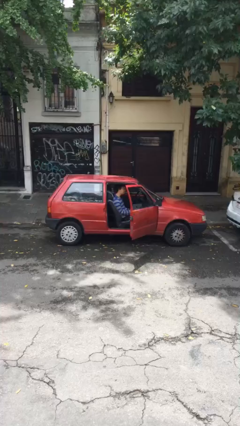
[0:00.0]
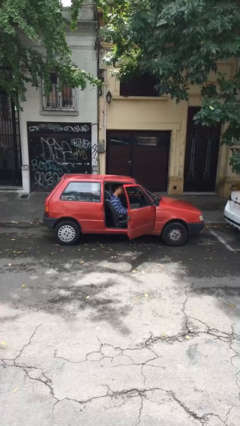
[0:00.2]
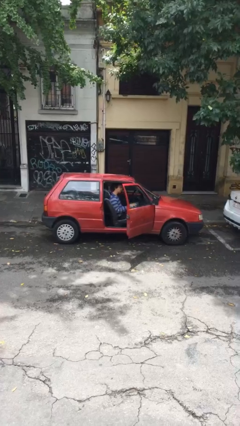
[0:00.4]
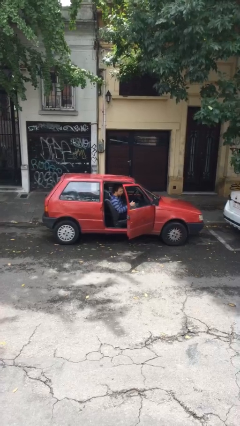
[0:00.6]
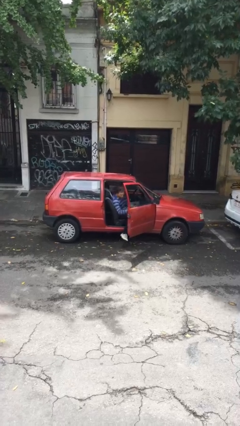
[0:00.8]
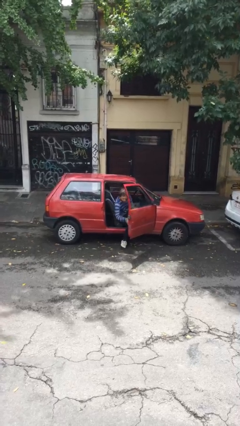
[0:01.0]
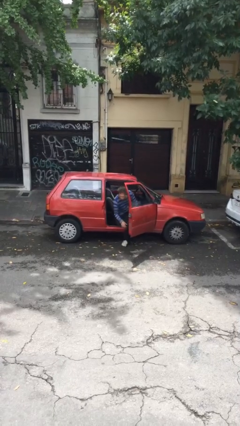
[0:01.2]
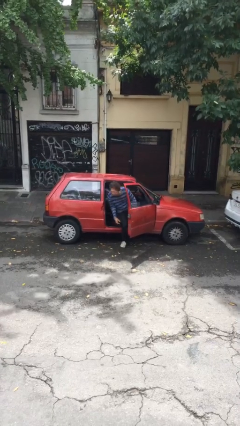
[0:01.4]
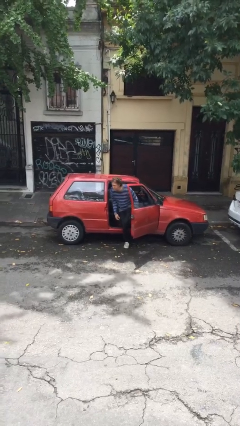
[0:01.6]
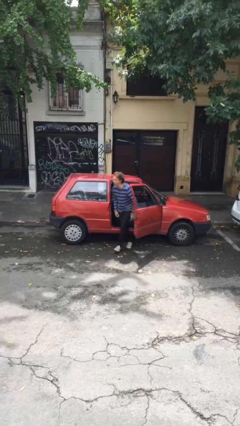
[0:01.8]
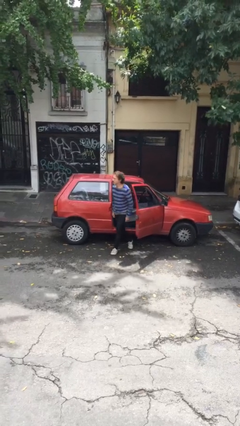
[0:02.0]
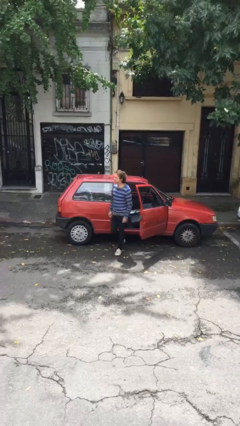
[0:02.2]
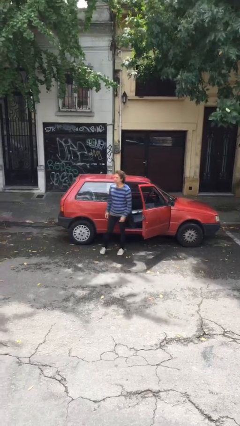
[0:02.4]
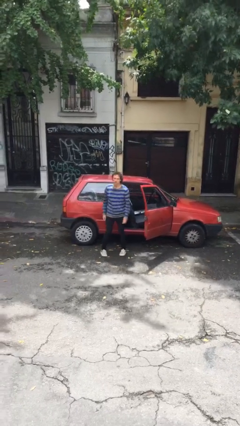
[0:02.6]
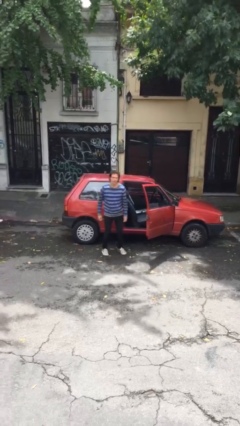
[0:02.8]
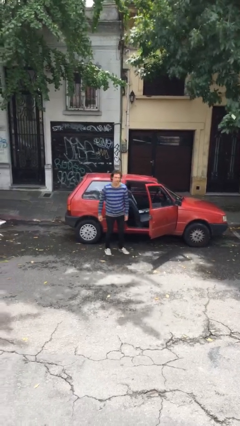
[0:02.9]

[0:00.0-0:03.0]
person exits car

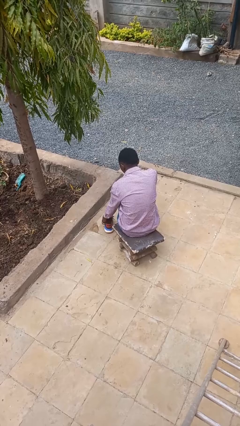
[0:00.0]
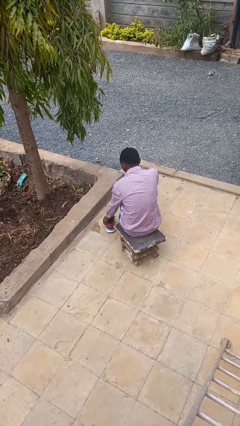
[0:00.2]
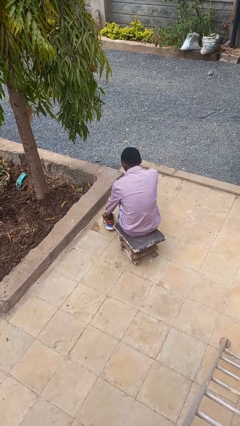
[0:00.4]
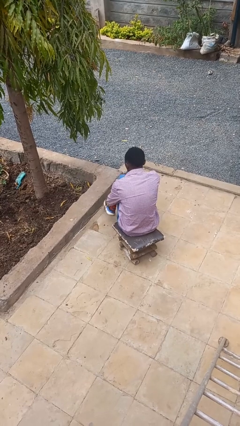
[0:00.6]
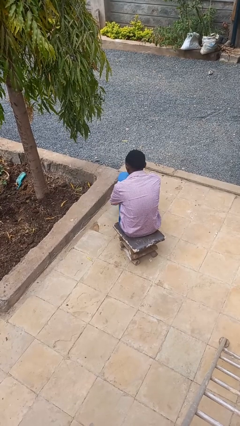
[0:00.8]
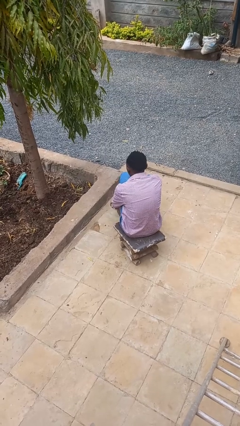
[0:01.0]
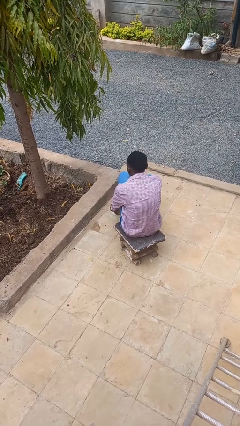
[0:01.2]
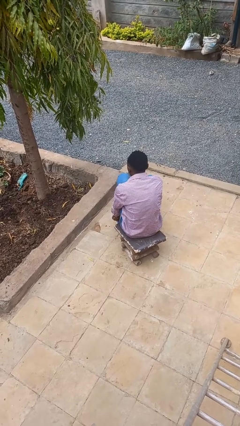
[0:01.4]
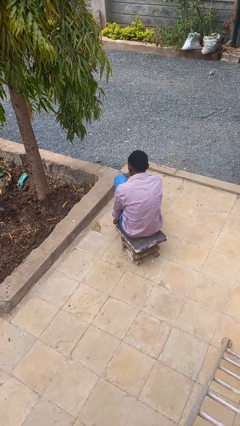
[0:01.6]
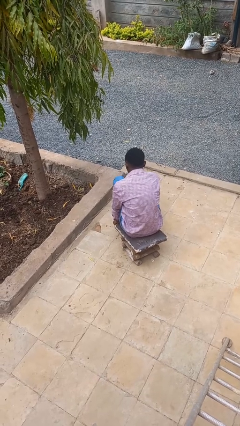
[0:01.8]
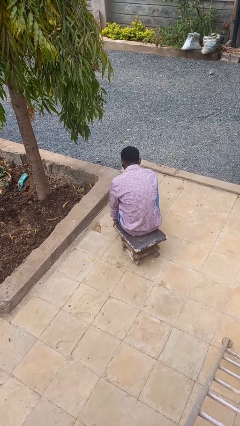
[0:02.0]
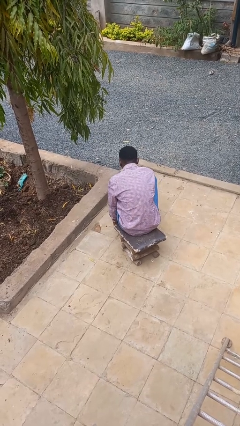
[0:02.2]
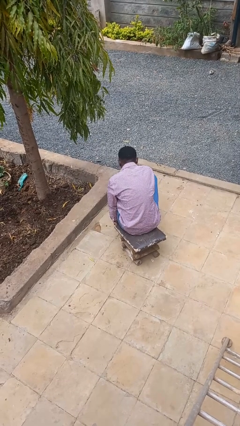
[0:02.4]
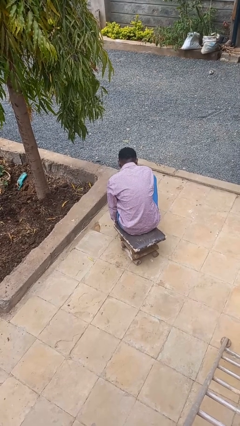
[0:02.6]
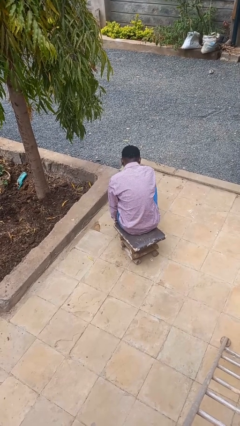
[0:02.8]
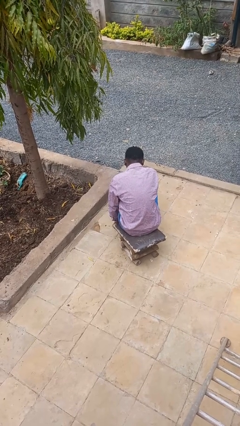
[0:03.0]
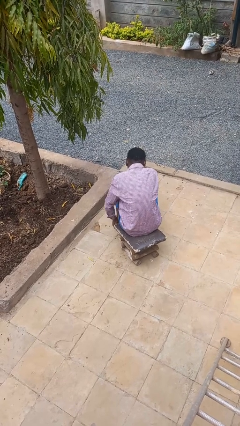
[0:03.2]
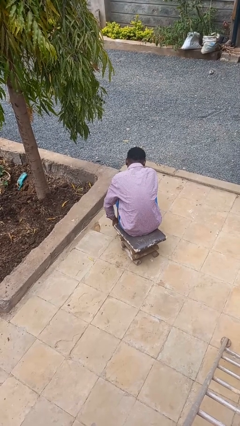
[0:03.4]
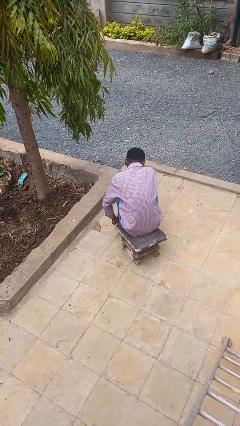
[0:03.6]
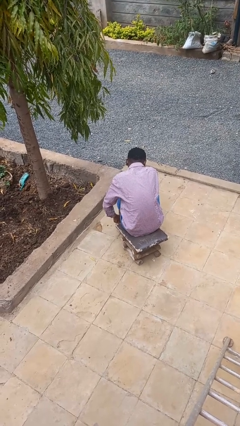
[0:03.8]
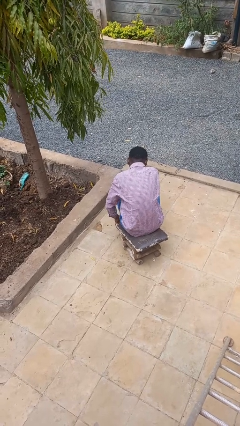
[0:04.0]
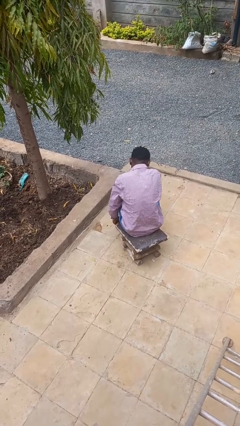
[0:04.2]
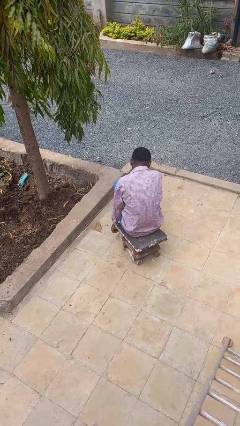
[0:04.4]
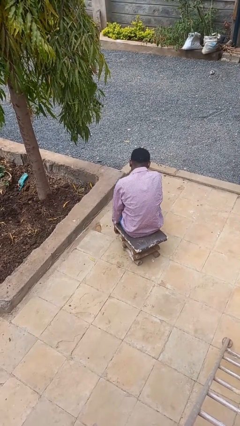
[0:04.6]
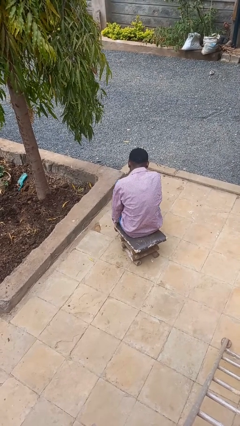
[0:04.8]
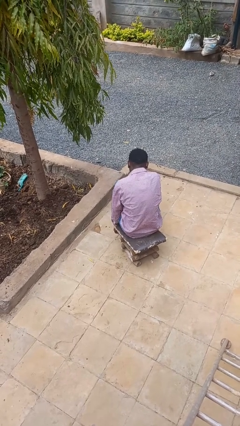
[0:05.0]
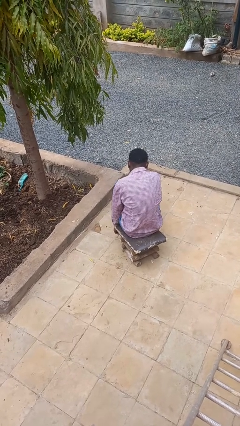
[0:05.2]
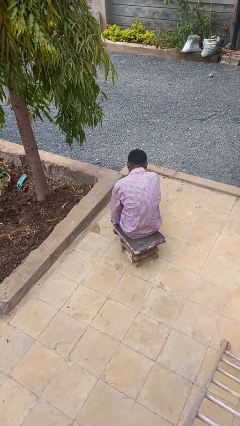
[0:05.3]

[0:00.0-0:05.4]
person puts on shoes

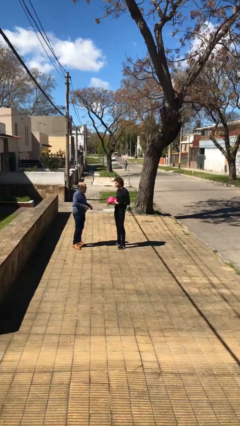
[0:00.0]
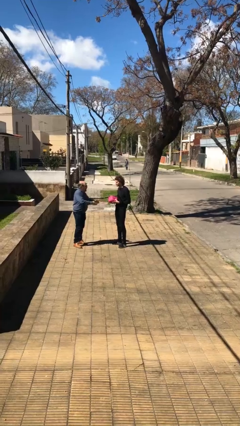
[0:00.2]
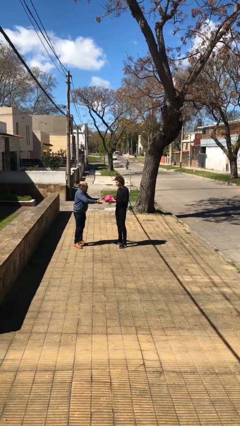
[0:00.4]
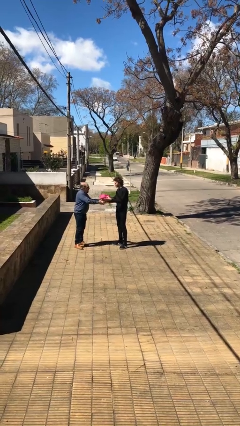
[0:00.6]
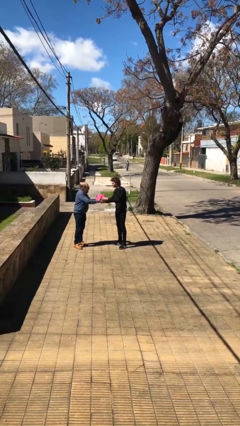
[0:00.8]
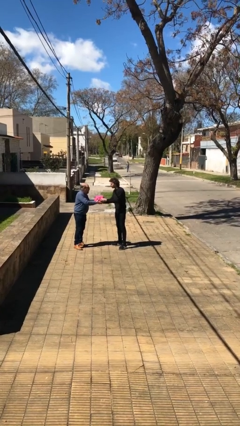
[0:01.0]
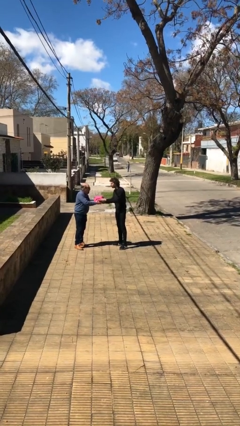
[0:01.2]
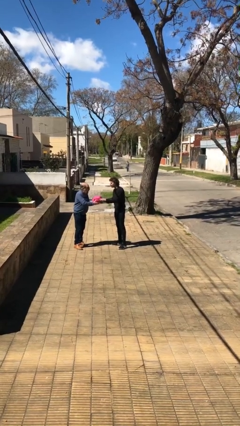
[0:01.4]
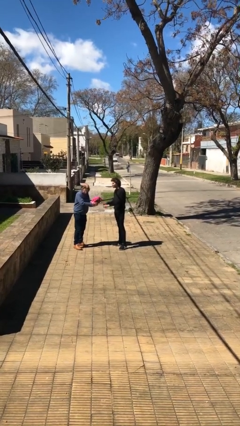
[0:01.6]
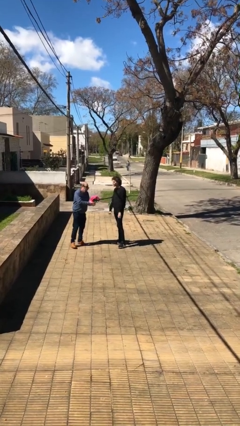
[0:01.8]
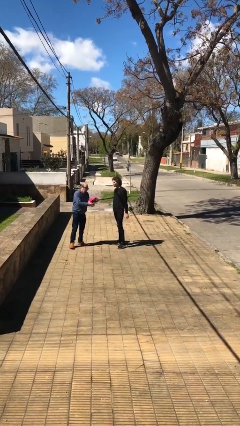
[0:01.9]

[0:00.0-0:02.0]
person transfers object to person

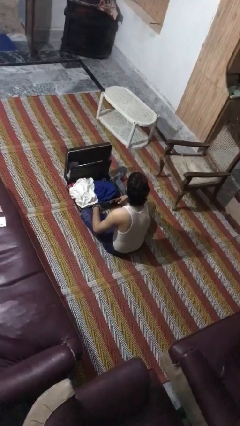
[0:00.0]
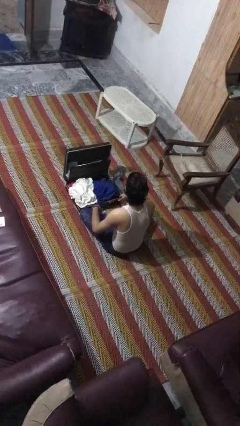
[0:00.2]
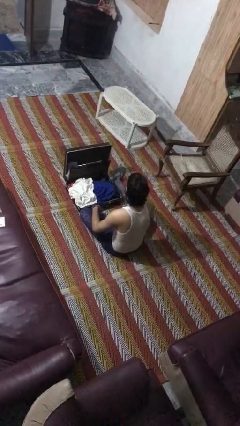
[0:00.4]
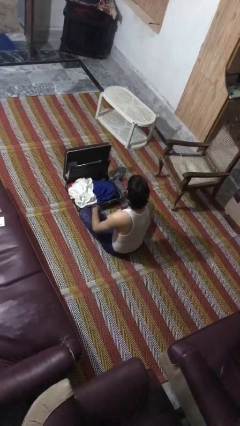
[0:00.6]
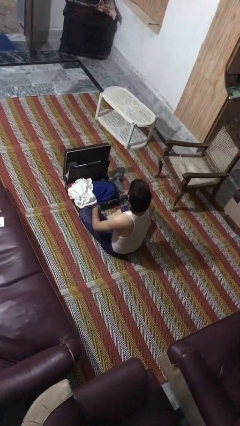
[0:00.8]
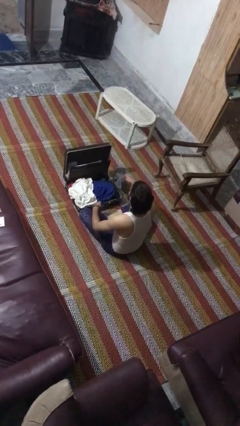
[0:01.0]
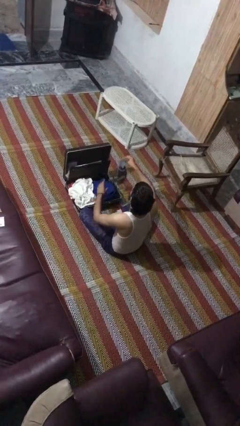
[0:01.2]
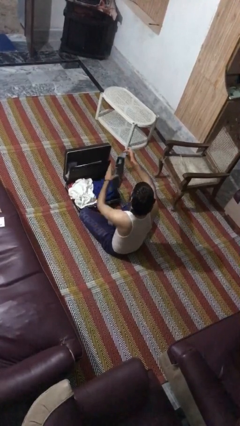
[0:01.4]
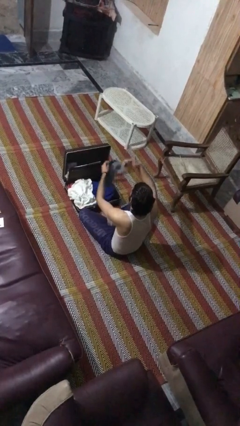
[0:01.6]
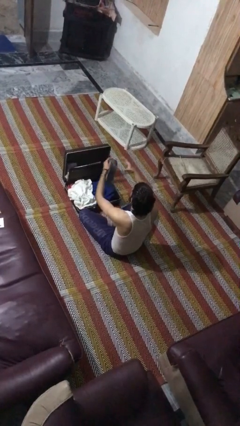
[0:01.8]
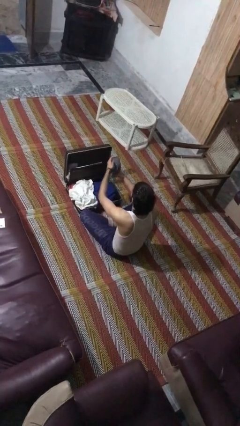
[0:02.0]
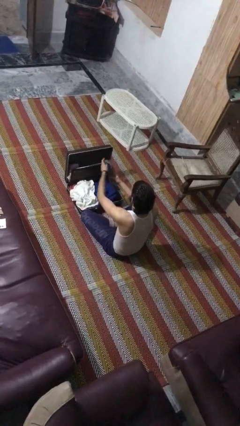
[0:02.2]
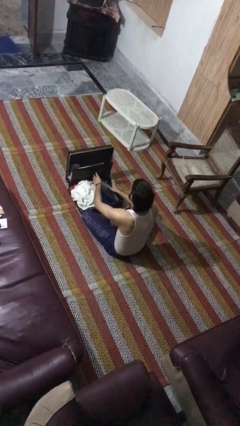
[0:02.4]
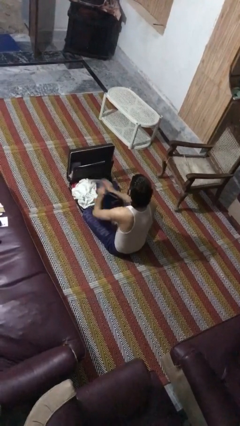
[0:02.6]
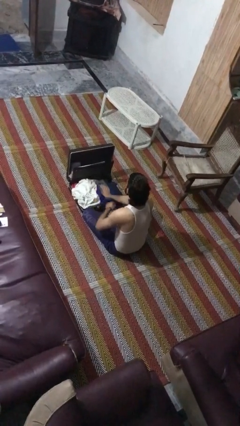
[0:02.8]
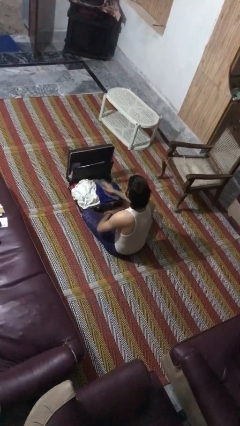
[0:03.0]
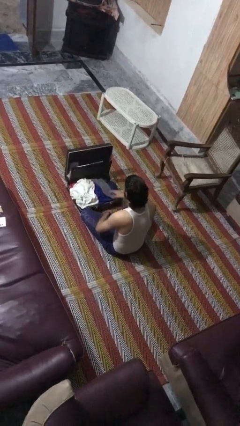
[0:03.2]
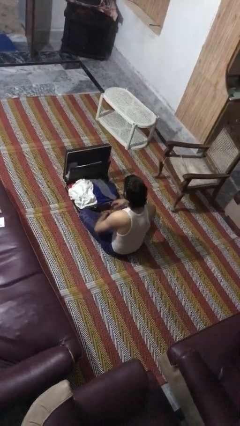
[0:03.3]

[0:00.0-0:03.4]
person loads clothes into suitcase

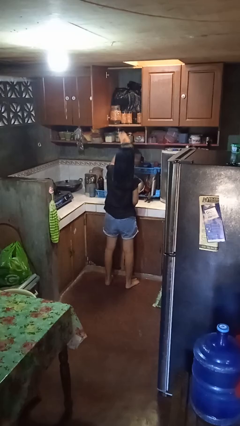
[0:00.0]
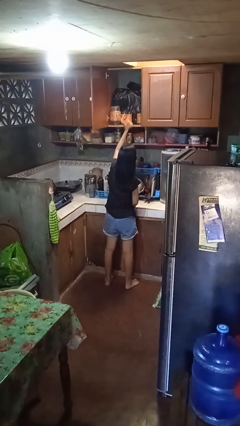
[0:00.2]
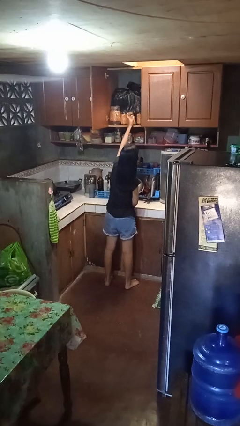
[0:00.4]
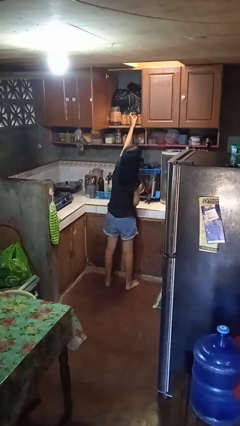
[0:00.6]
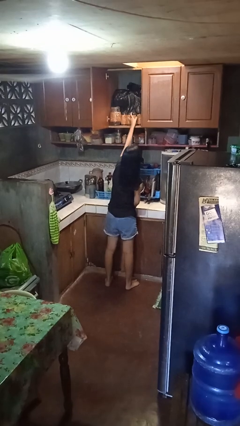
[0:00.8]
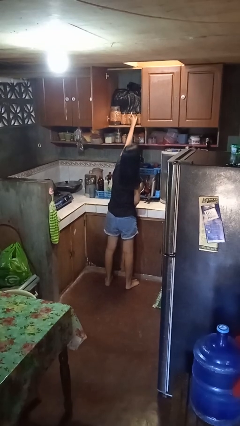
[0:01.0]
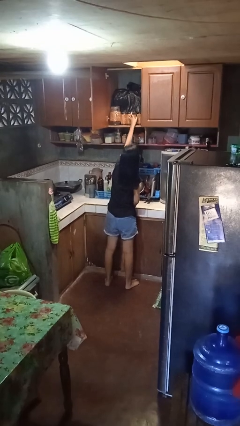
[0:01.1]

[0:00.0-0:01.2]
person puts down object into cabinet

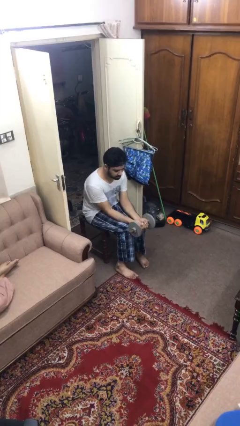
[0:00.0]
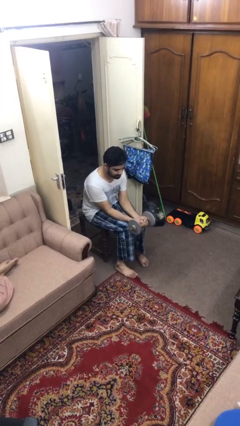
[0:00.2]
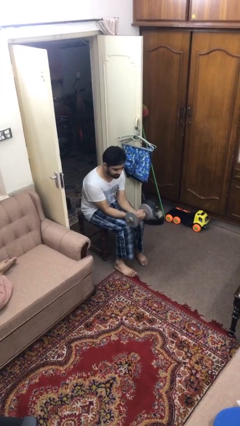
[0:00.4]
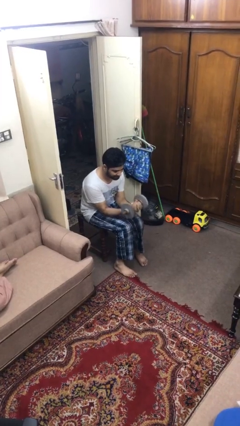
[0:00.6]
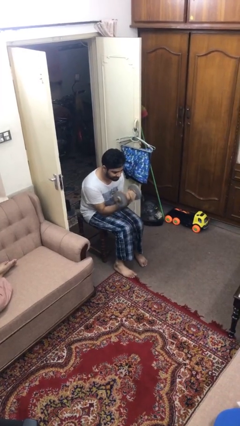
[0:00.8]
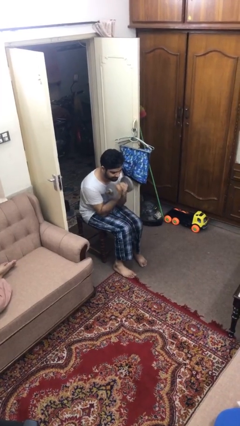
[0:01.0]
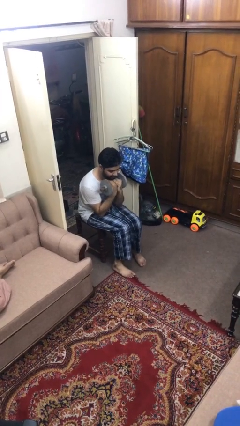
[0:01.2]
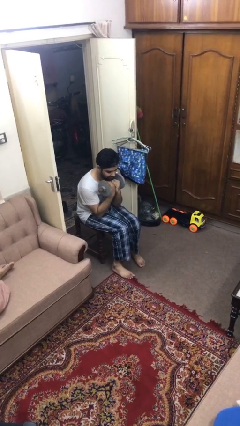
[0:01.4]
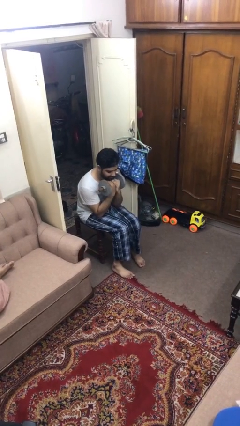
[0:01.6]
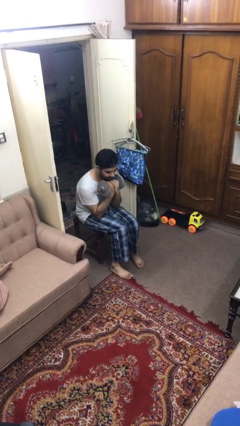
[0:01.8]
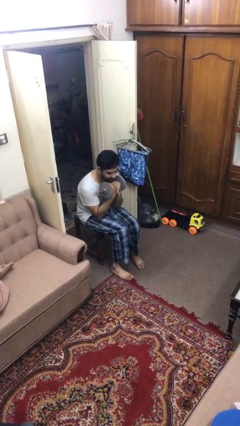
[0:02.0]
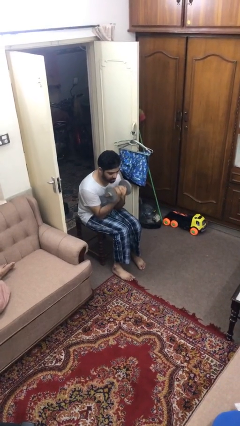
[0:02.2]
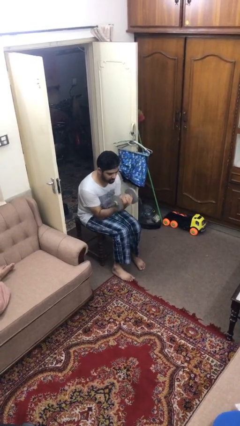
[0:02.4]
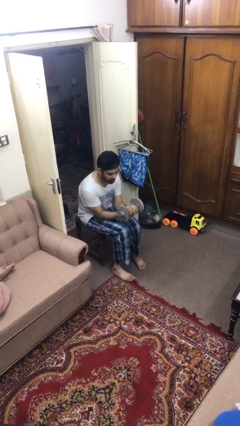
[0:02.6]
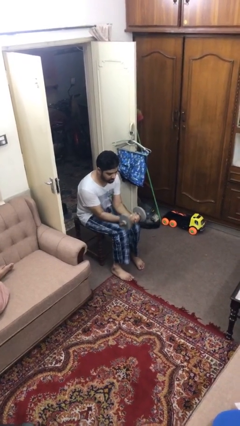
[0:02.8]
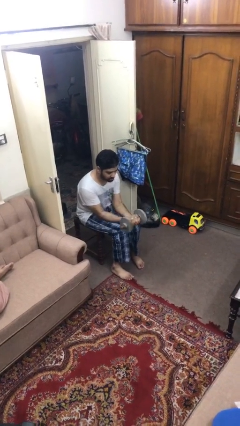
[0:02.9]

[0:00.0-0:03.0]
person lifts dumbbells
